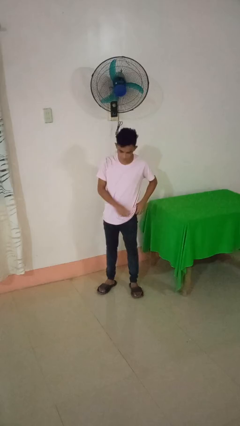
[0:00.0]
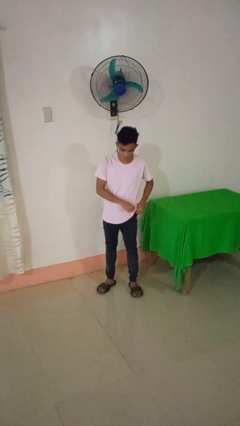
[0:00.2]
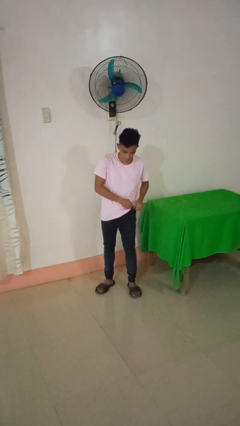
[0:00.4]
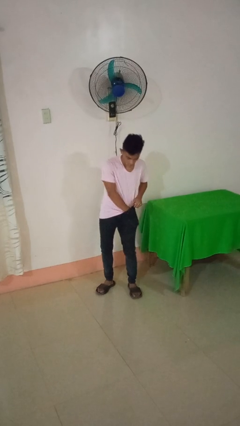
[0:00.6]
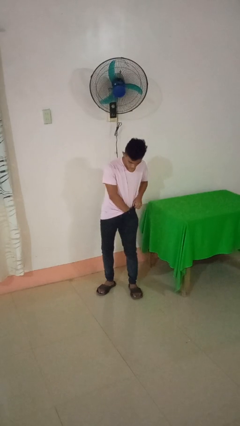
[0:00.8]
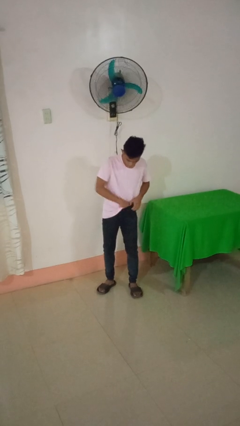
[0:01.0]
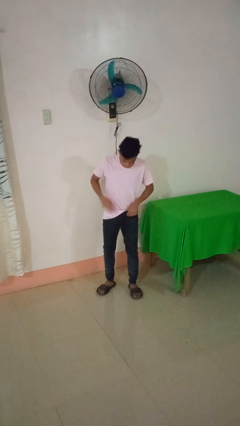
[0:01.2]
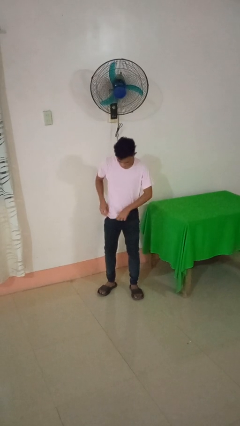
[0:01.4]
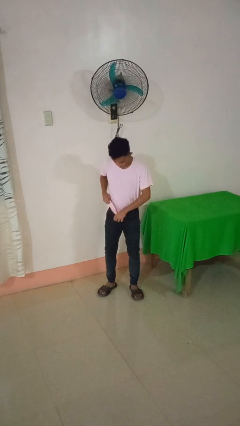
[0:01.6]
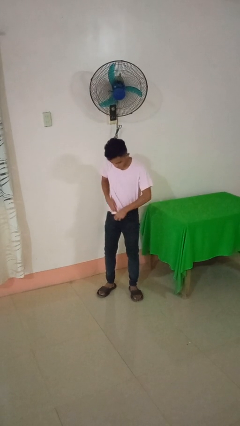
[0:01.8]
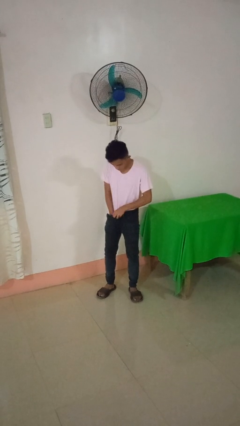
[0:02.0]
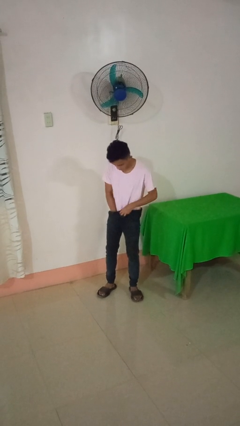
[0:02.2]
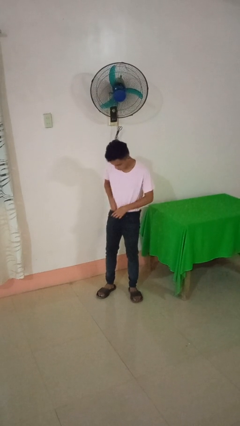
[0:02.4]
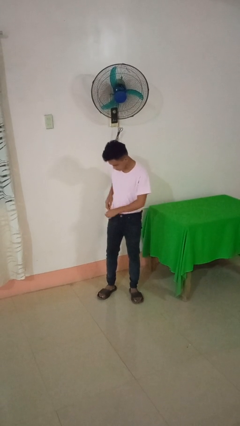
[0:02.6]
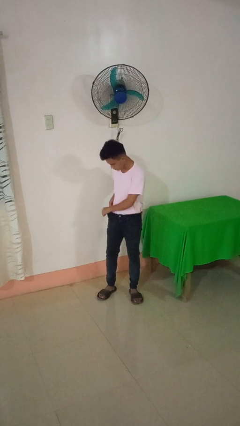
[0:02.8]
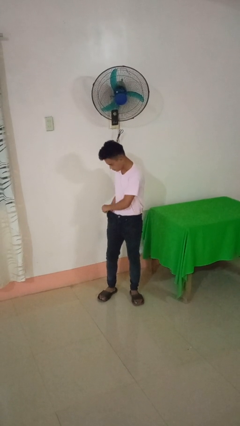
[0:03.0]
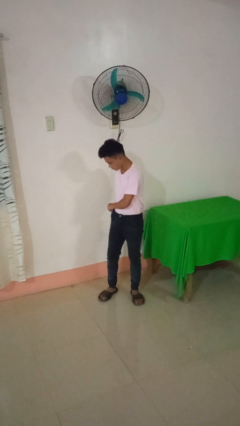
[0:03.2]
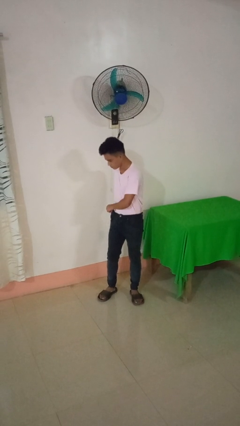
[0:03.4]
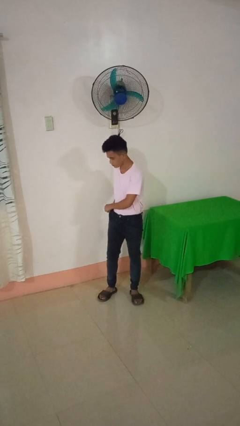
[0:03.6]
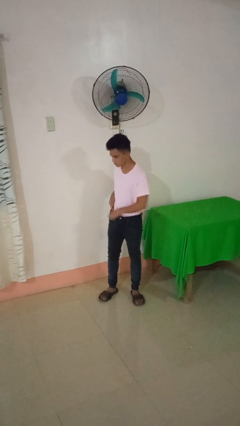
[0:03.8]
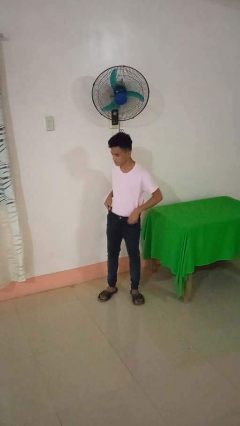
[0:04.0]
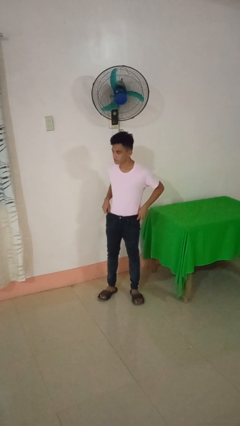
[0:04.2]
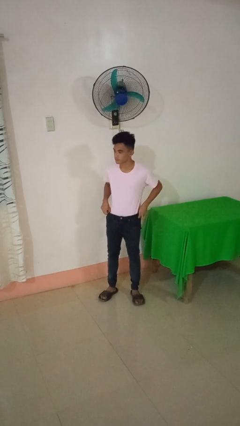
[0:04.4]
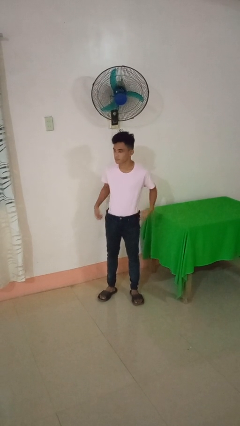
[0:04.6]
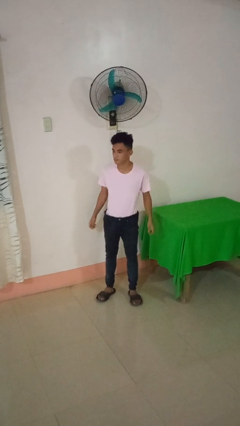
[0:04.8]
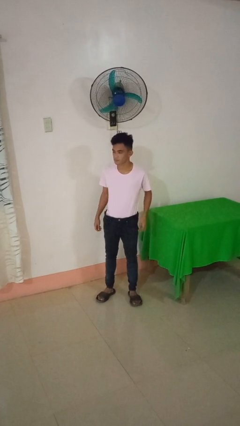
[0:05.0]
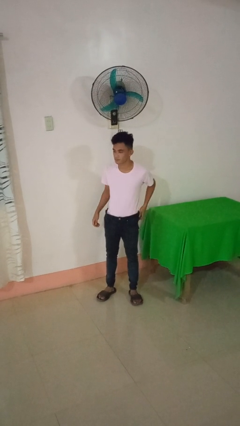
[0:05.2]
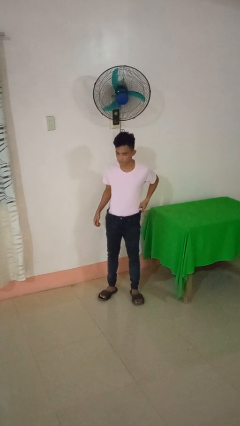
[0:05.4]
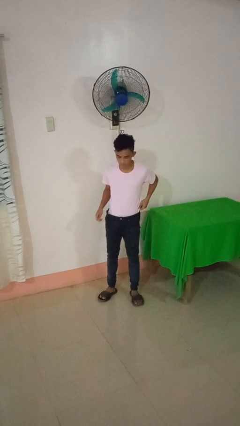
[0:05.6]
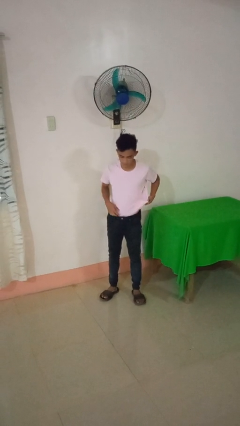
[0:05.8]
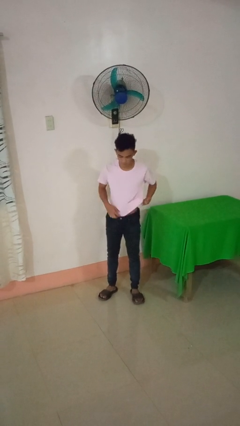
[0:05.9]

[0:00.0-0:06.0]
person tucks in shirt

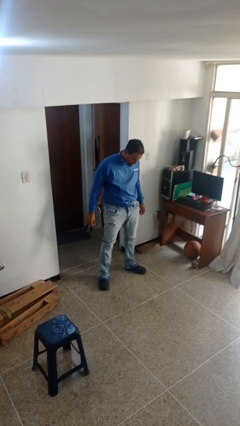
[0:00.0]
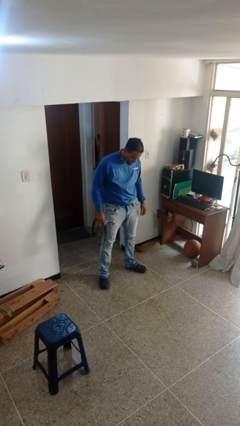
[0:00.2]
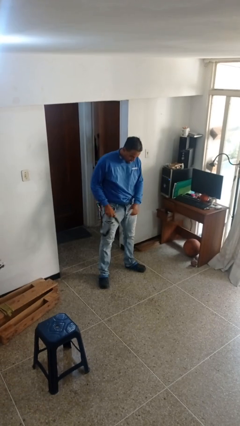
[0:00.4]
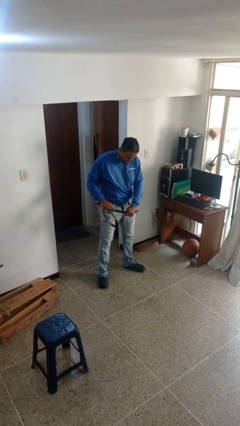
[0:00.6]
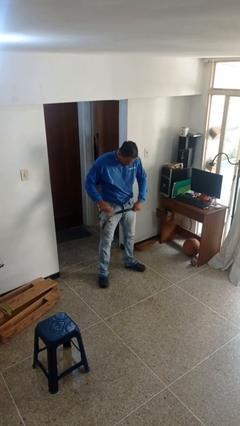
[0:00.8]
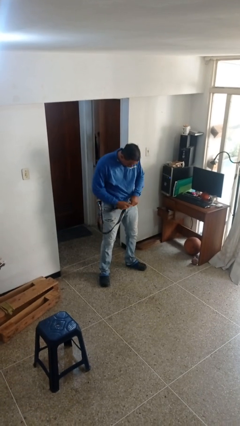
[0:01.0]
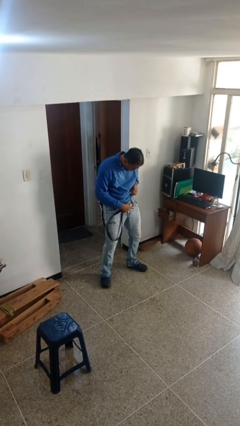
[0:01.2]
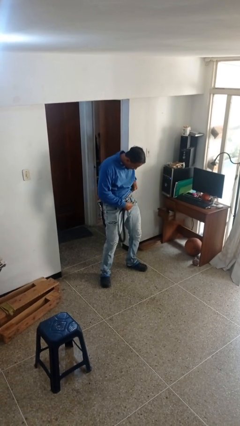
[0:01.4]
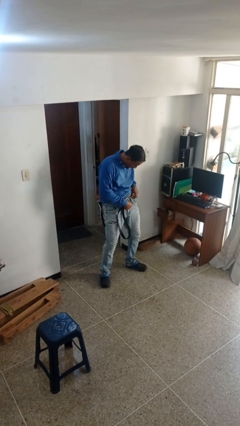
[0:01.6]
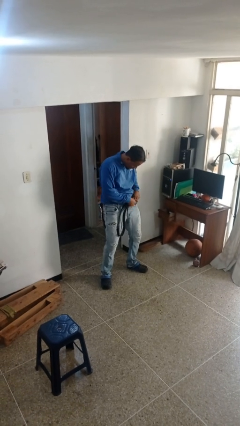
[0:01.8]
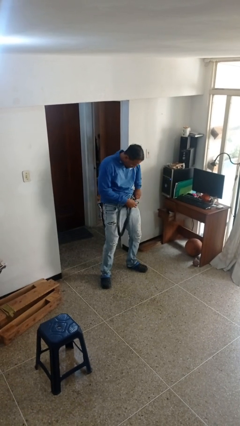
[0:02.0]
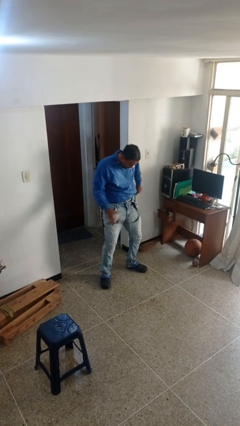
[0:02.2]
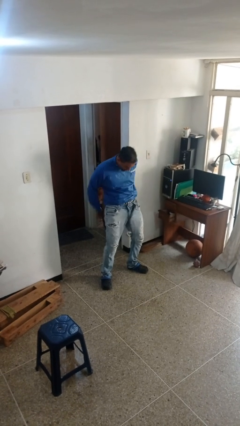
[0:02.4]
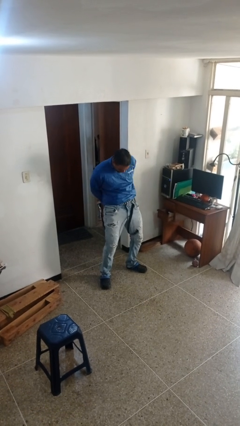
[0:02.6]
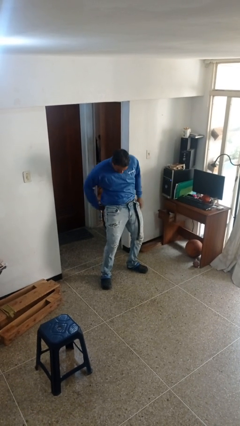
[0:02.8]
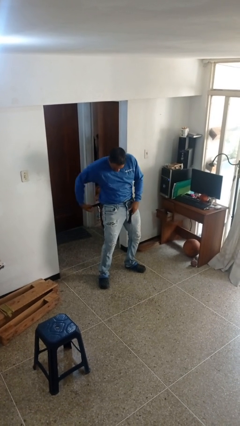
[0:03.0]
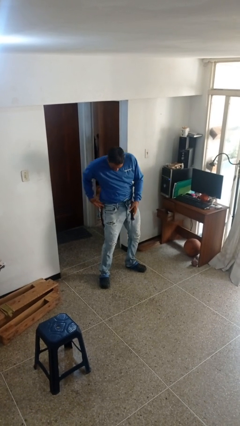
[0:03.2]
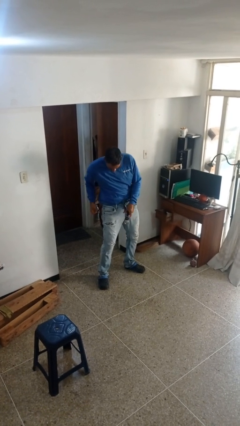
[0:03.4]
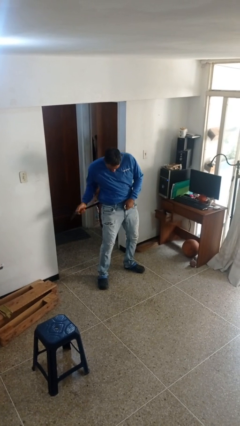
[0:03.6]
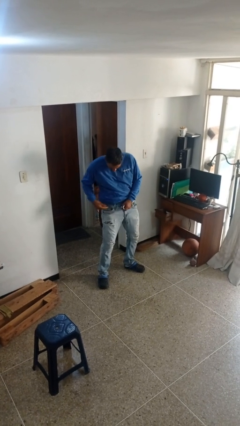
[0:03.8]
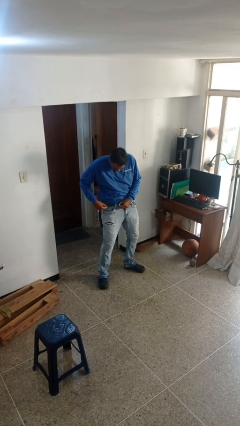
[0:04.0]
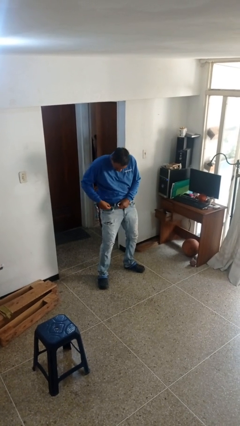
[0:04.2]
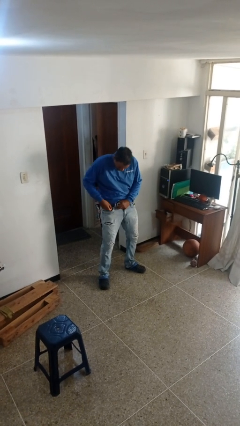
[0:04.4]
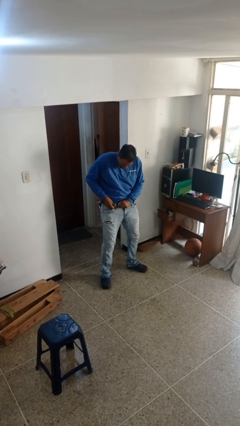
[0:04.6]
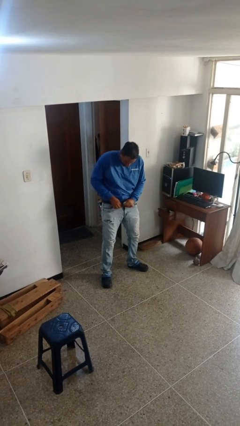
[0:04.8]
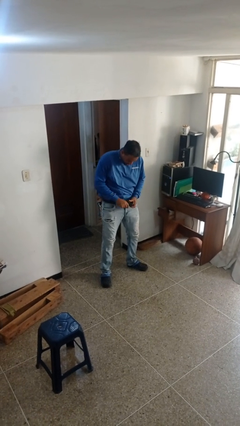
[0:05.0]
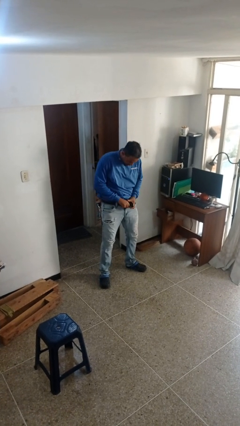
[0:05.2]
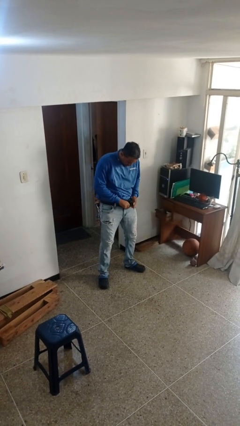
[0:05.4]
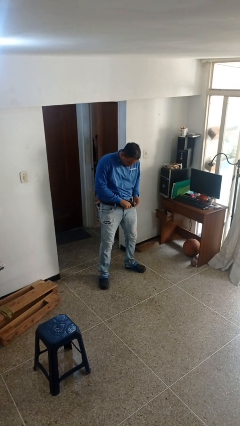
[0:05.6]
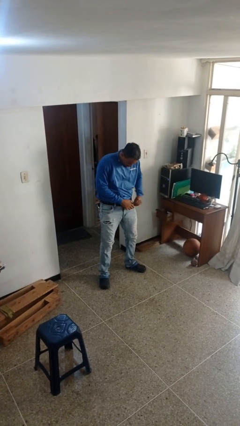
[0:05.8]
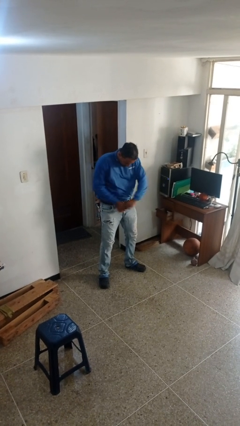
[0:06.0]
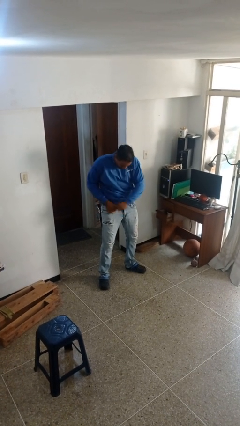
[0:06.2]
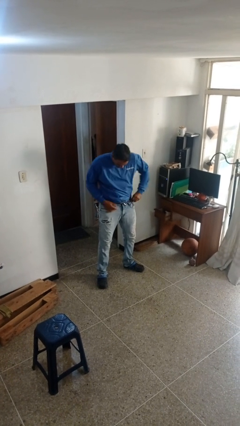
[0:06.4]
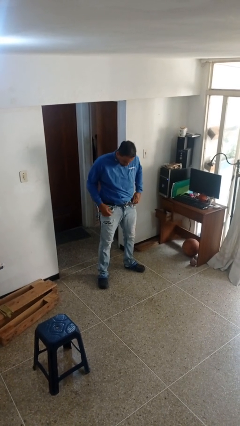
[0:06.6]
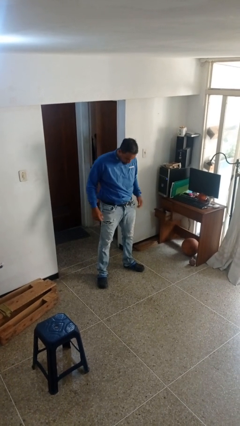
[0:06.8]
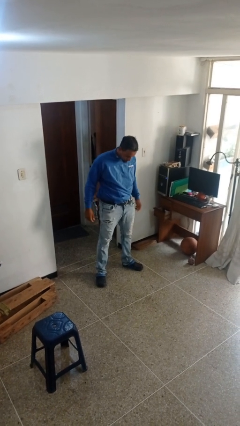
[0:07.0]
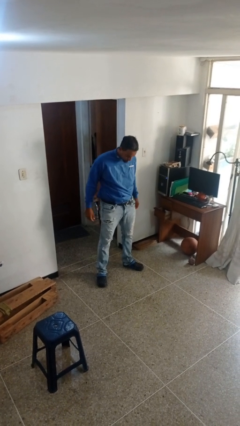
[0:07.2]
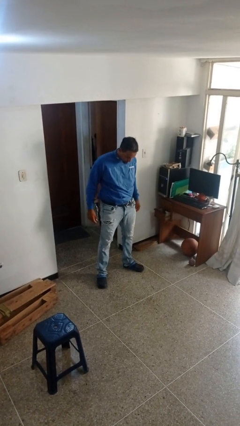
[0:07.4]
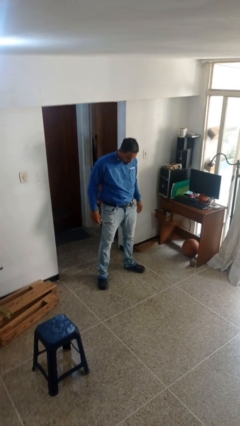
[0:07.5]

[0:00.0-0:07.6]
person puts on belt

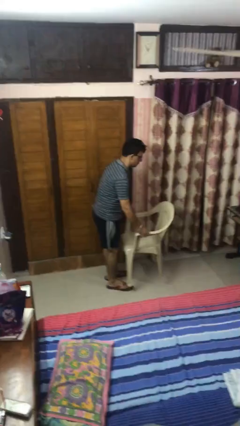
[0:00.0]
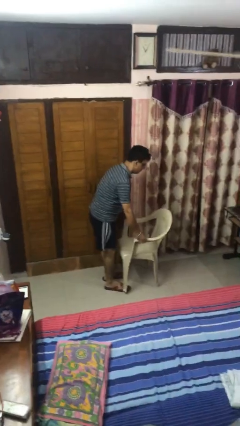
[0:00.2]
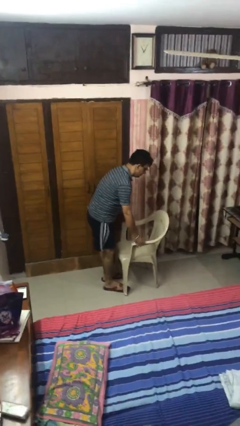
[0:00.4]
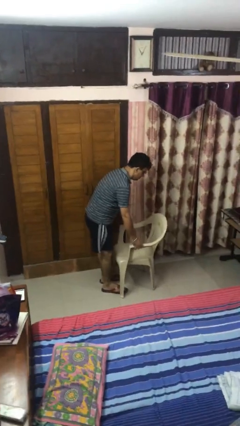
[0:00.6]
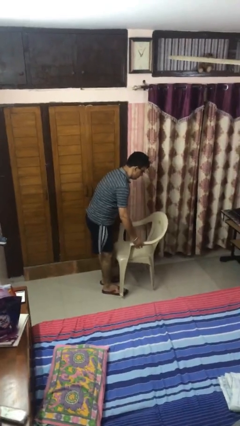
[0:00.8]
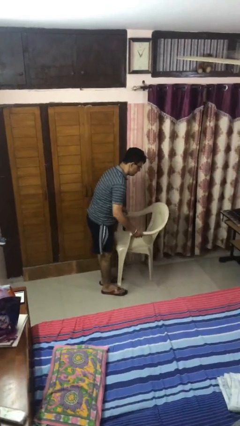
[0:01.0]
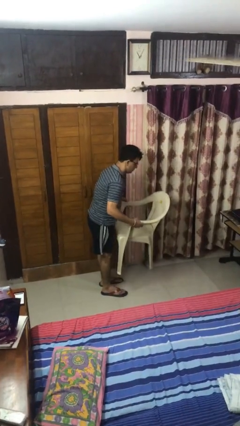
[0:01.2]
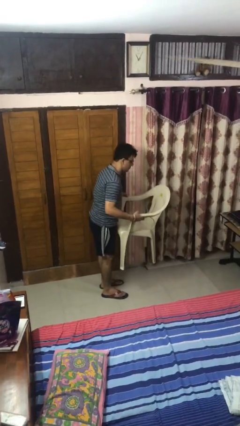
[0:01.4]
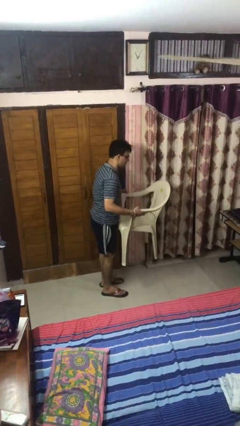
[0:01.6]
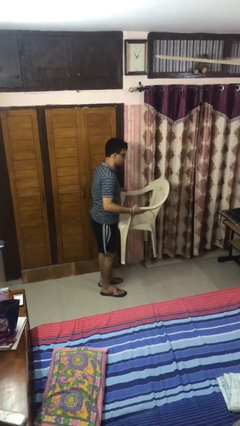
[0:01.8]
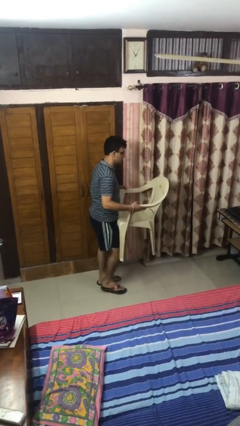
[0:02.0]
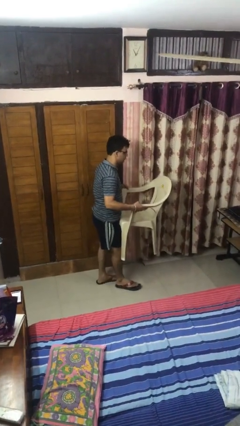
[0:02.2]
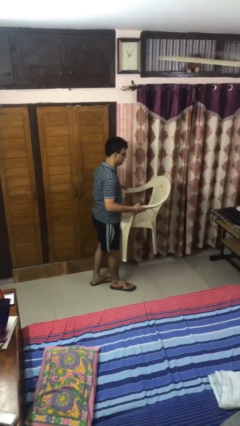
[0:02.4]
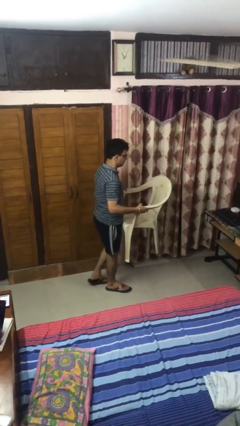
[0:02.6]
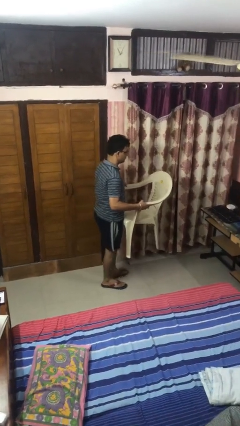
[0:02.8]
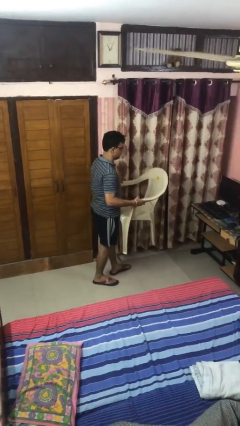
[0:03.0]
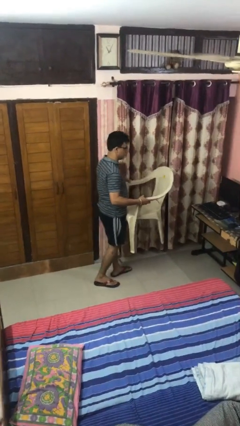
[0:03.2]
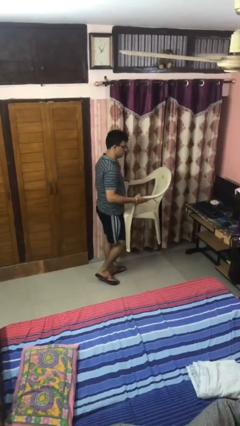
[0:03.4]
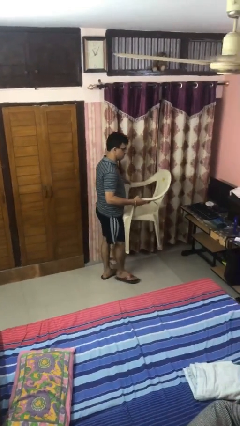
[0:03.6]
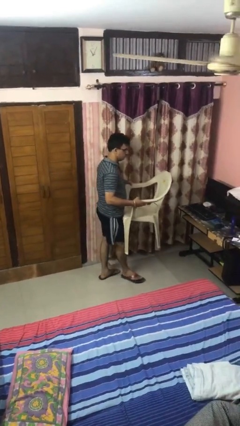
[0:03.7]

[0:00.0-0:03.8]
person carries furniture

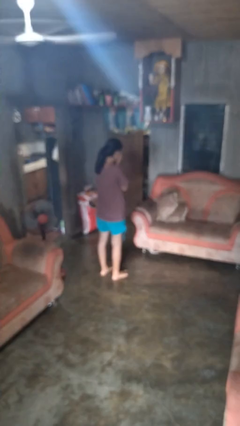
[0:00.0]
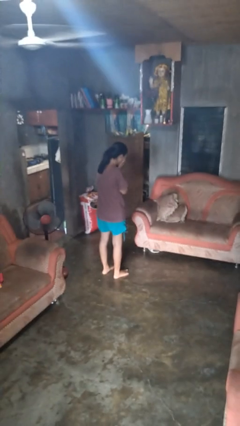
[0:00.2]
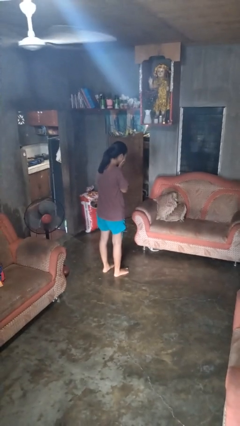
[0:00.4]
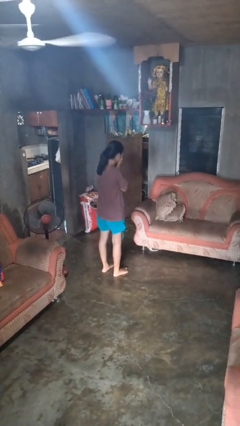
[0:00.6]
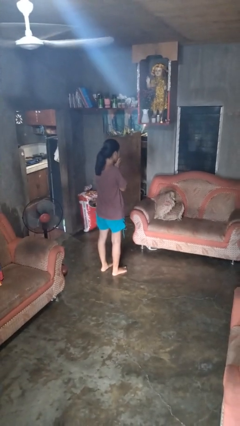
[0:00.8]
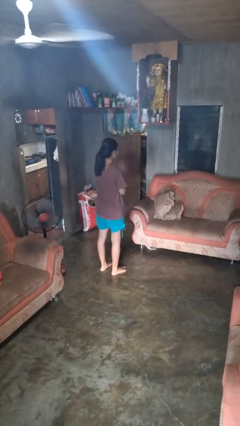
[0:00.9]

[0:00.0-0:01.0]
person sneezes into hand
